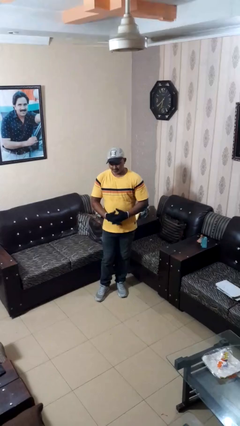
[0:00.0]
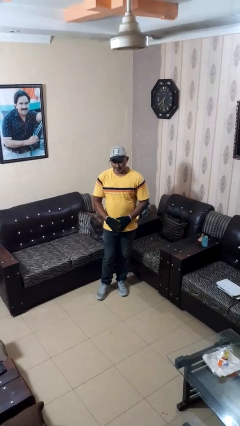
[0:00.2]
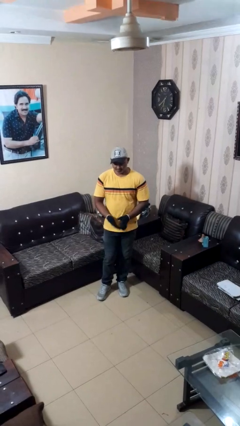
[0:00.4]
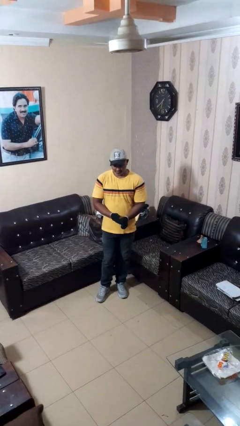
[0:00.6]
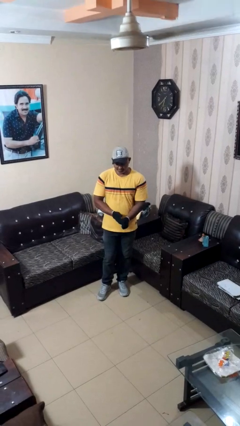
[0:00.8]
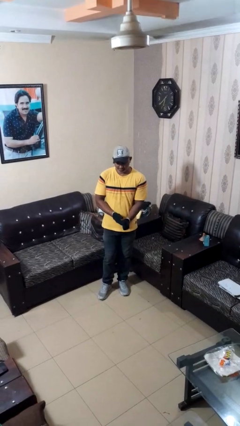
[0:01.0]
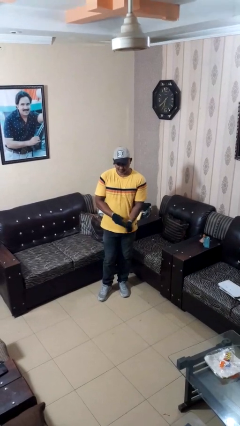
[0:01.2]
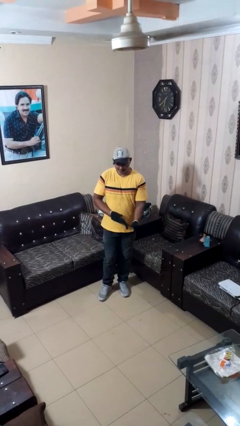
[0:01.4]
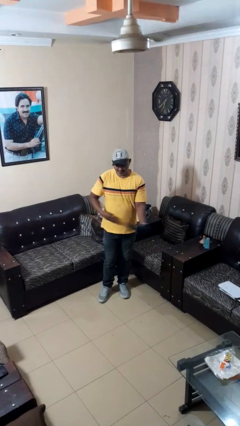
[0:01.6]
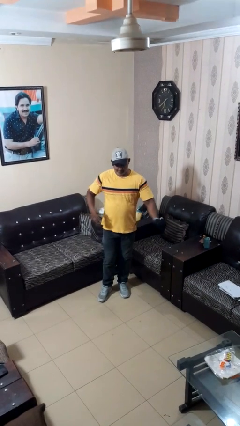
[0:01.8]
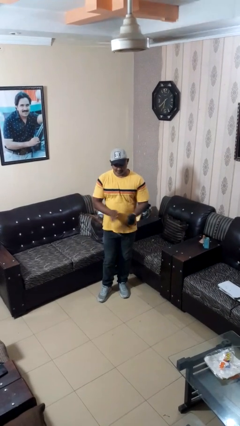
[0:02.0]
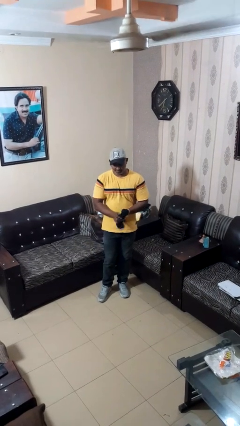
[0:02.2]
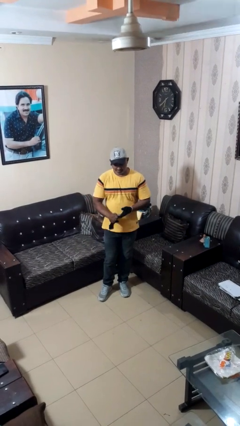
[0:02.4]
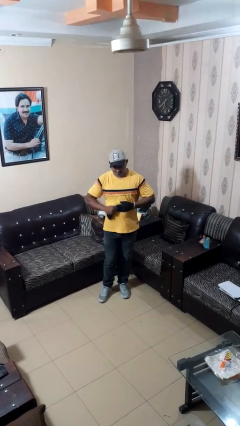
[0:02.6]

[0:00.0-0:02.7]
person takes off gloves

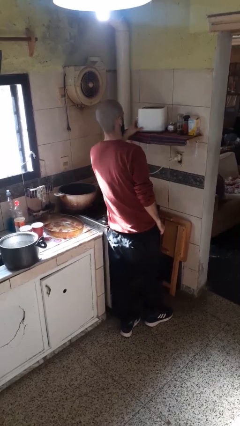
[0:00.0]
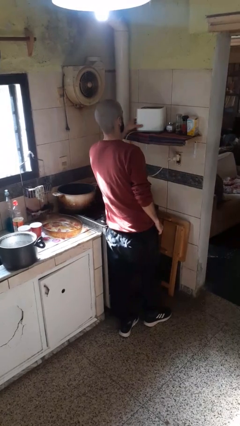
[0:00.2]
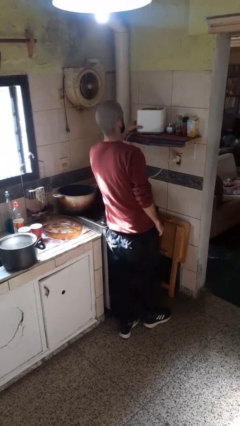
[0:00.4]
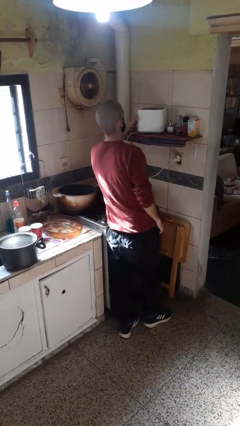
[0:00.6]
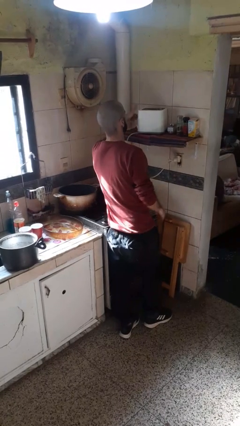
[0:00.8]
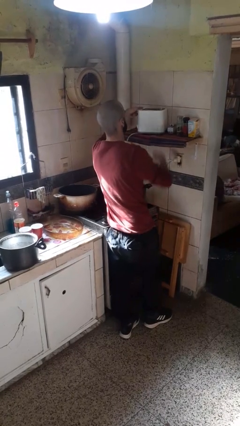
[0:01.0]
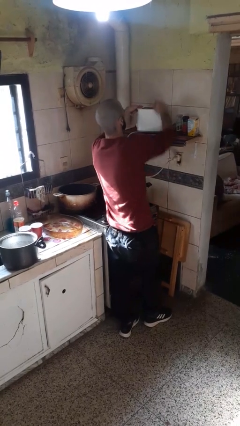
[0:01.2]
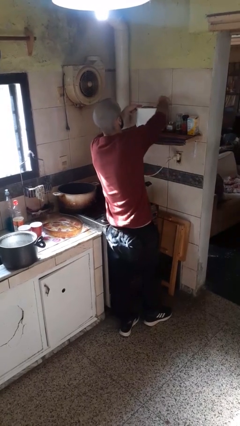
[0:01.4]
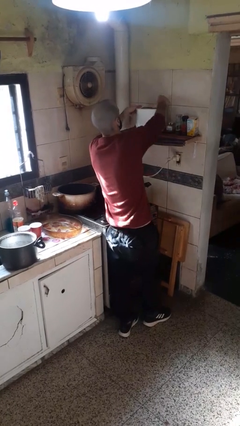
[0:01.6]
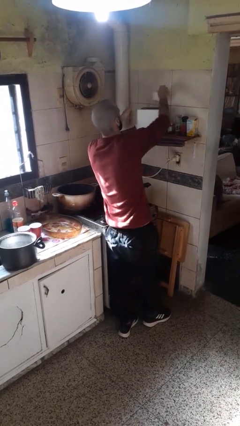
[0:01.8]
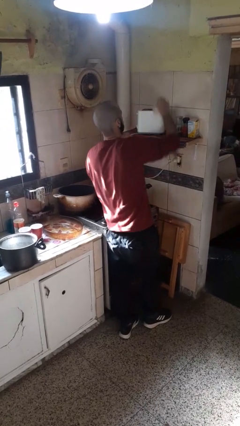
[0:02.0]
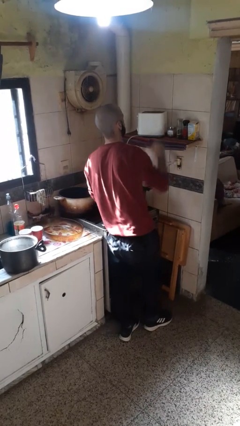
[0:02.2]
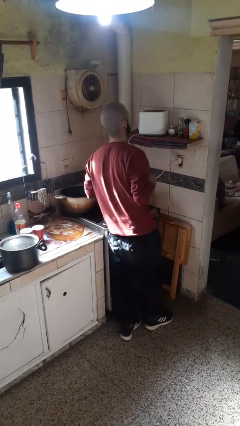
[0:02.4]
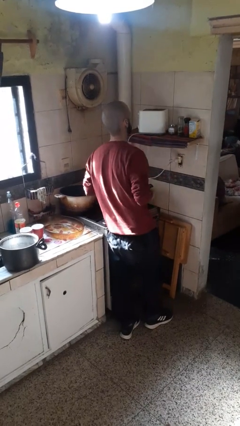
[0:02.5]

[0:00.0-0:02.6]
person takes object from toaster

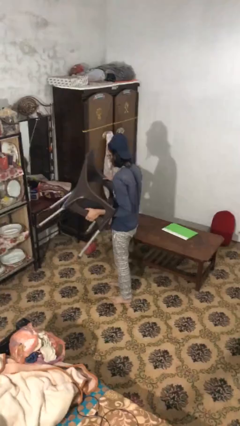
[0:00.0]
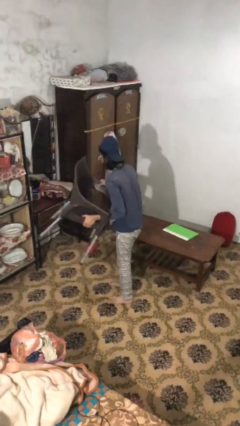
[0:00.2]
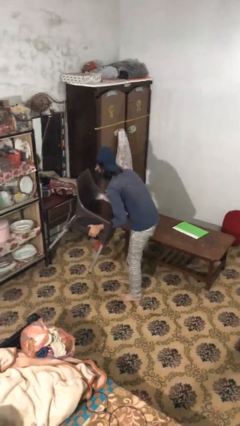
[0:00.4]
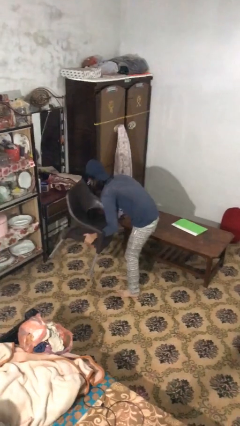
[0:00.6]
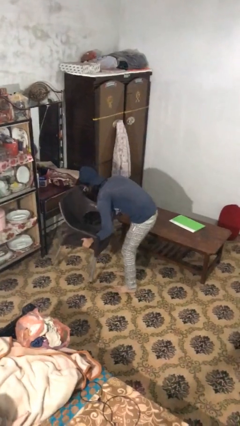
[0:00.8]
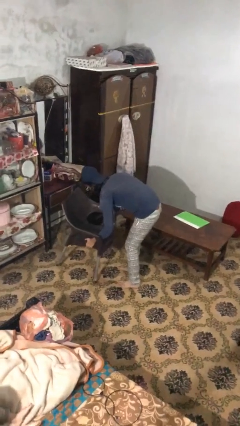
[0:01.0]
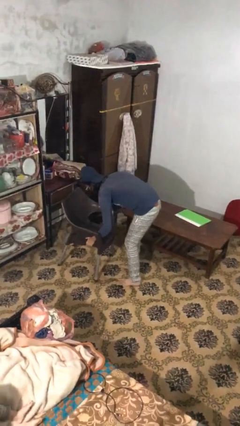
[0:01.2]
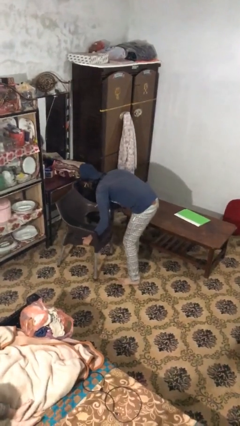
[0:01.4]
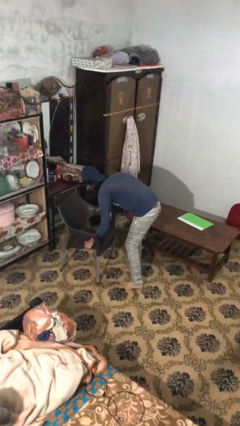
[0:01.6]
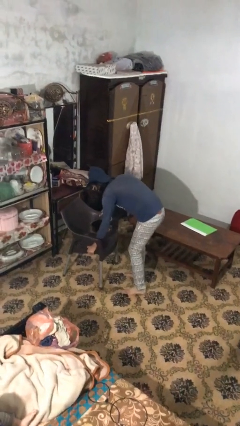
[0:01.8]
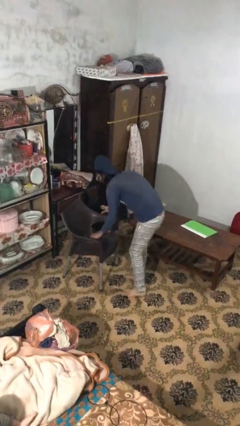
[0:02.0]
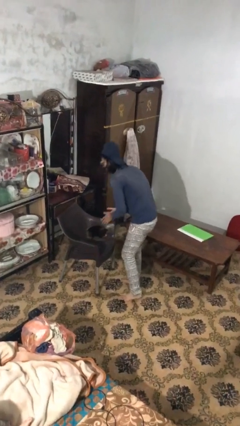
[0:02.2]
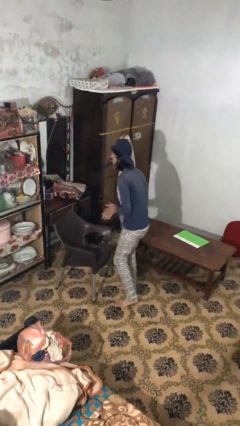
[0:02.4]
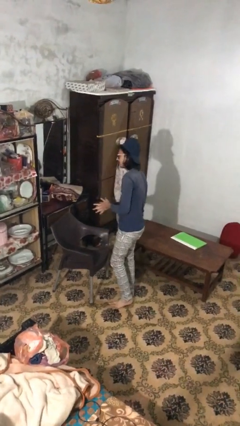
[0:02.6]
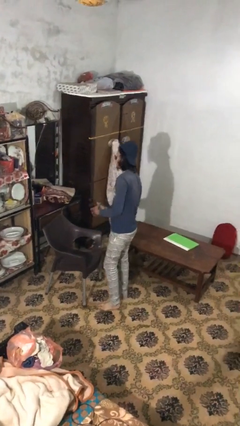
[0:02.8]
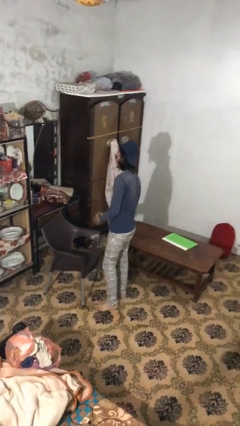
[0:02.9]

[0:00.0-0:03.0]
person puts down object on floor

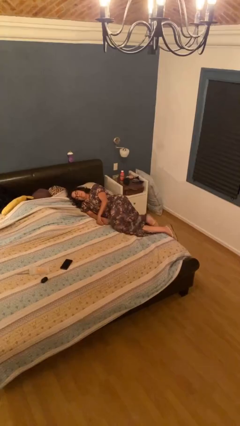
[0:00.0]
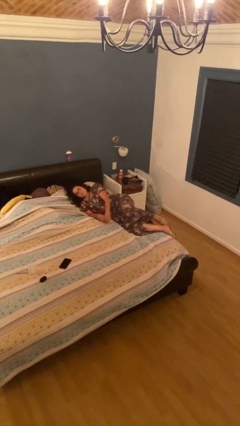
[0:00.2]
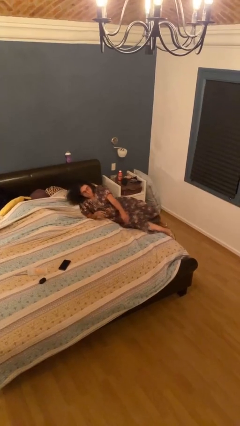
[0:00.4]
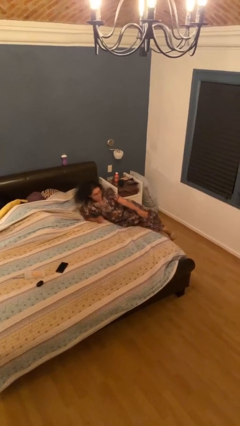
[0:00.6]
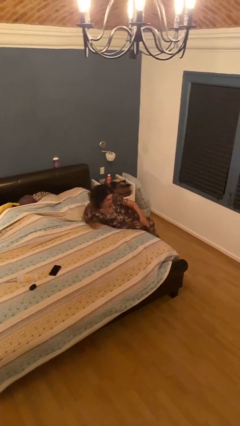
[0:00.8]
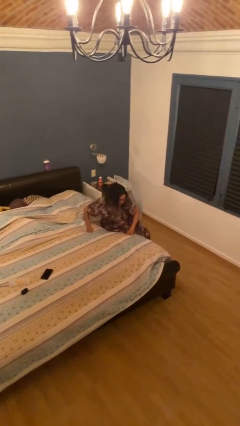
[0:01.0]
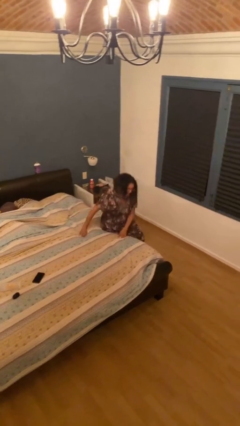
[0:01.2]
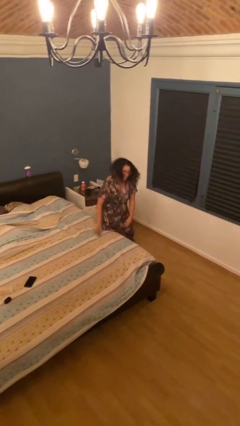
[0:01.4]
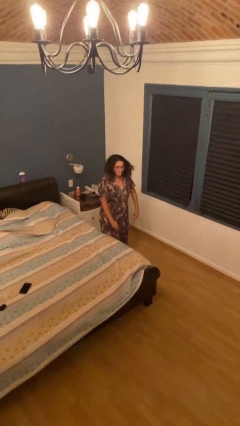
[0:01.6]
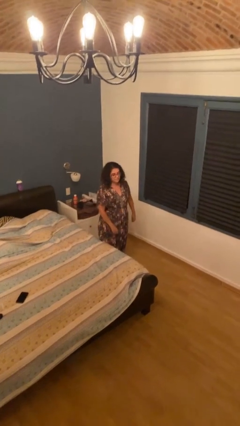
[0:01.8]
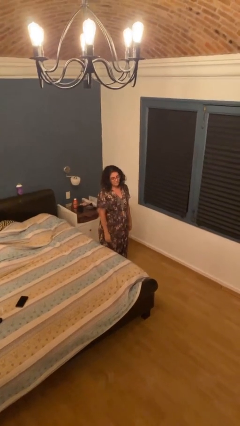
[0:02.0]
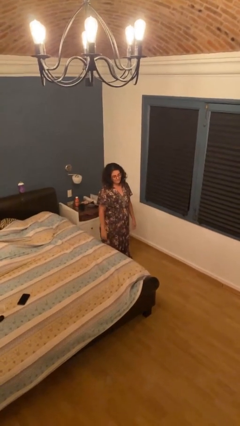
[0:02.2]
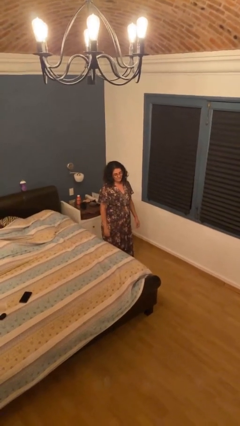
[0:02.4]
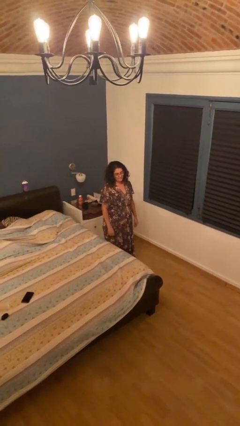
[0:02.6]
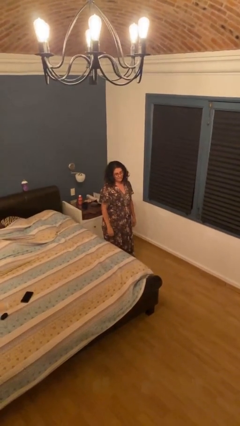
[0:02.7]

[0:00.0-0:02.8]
person stands up

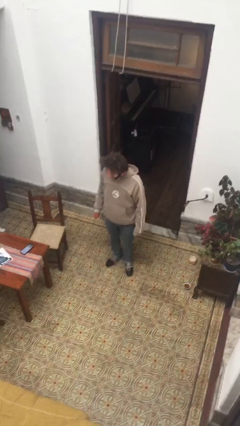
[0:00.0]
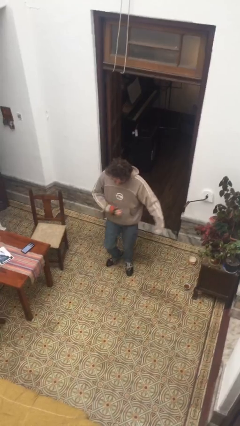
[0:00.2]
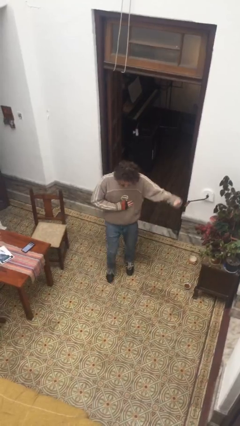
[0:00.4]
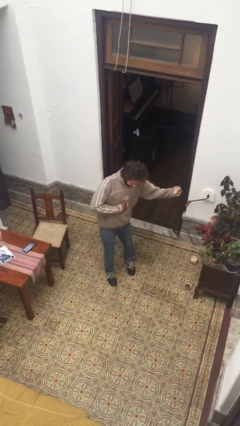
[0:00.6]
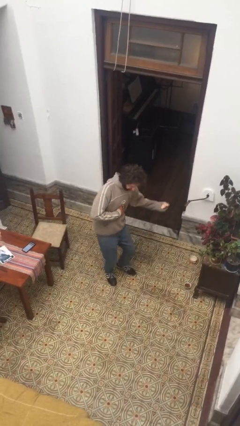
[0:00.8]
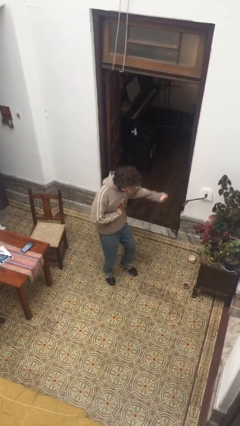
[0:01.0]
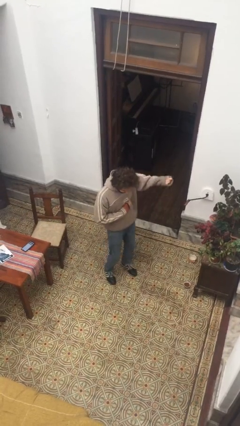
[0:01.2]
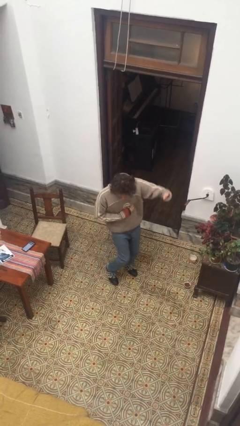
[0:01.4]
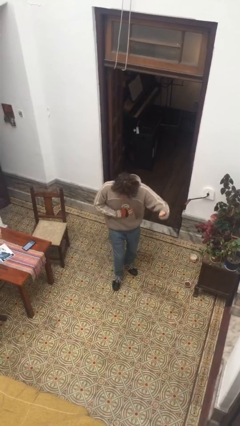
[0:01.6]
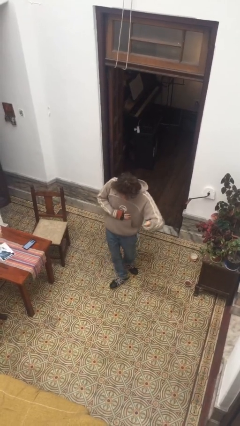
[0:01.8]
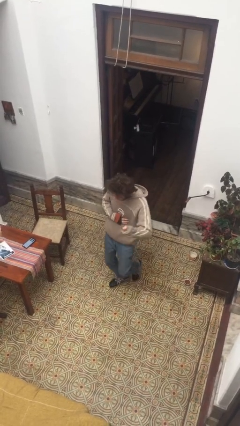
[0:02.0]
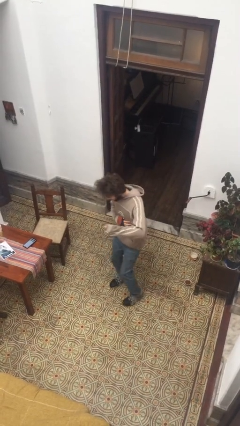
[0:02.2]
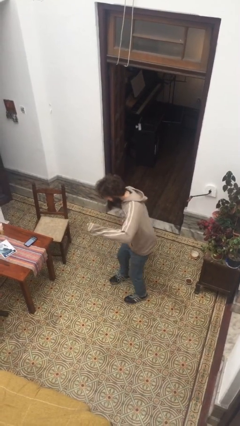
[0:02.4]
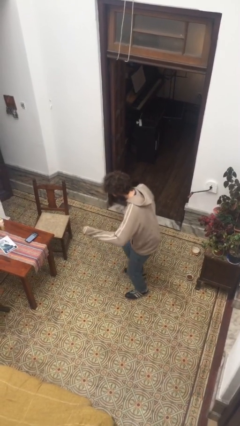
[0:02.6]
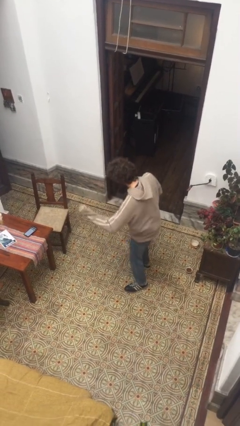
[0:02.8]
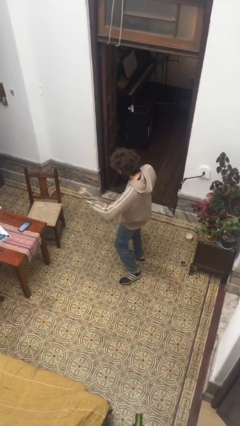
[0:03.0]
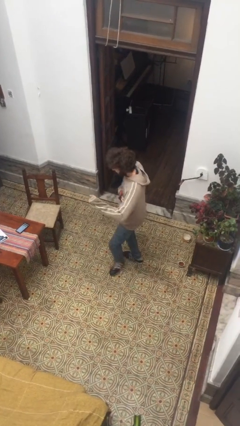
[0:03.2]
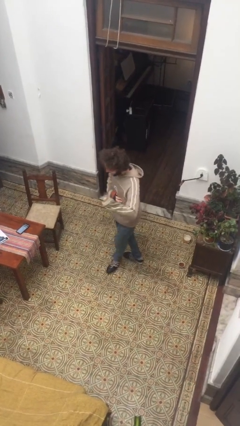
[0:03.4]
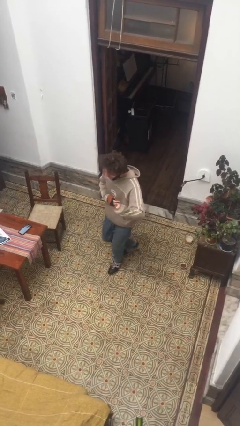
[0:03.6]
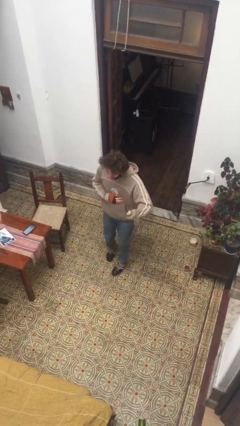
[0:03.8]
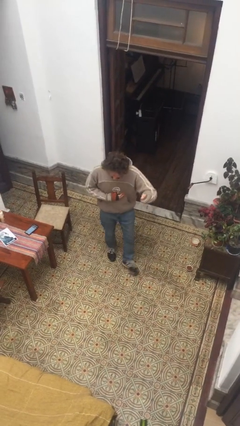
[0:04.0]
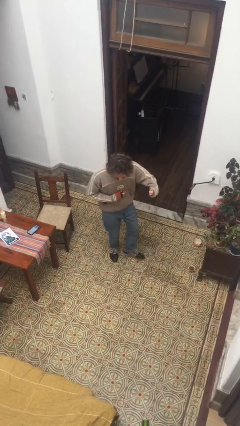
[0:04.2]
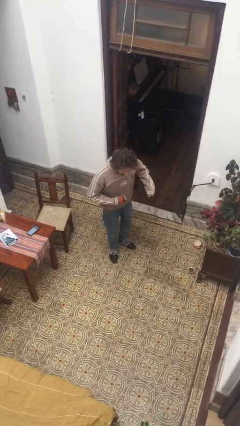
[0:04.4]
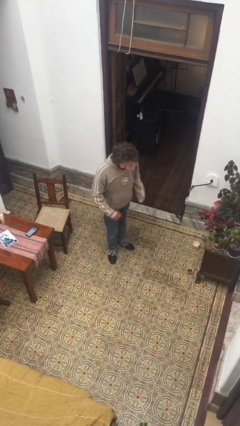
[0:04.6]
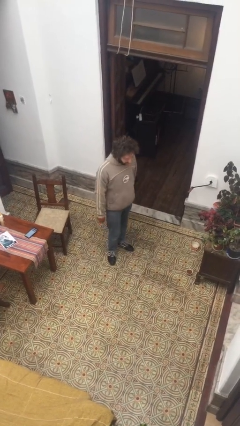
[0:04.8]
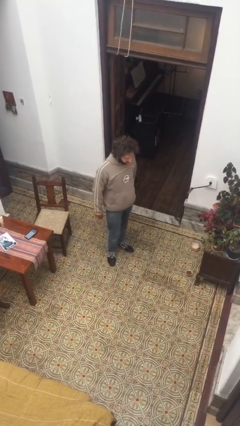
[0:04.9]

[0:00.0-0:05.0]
person dances in place

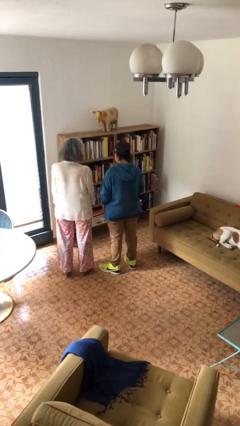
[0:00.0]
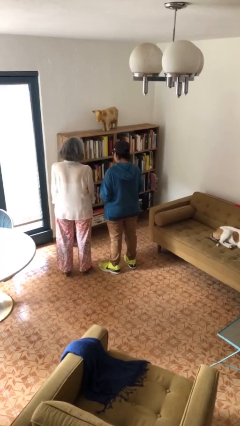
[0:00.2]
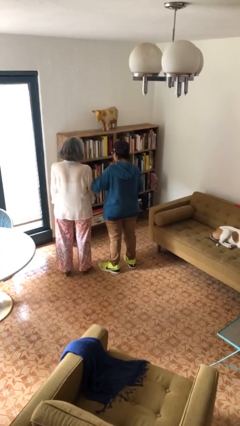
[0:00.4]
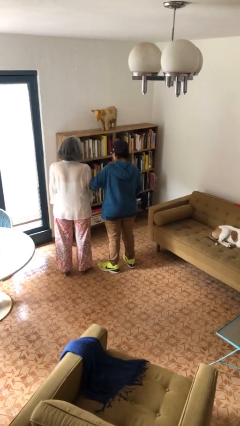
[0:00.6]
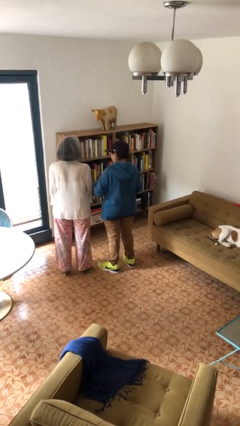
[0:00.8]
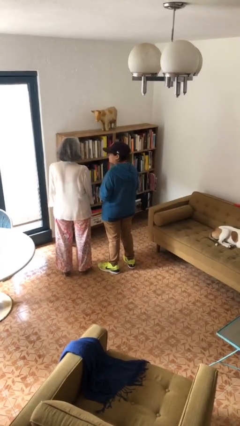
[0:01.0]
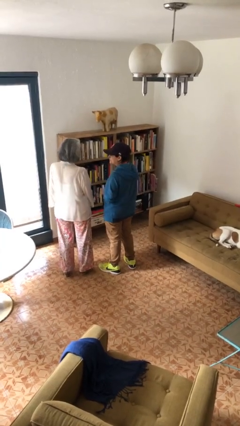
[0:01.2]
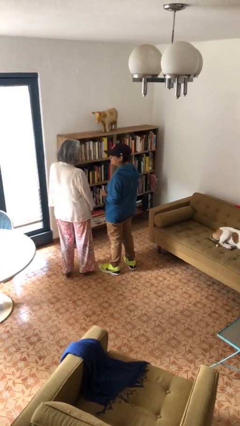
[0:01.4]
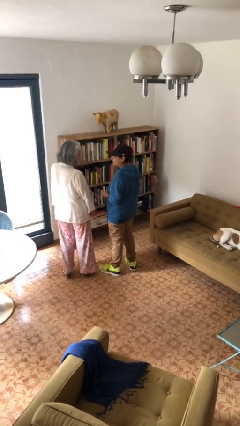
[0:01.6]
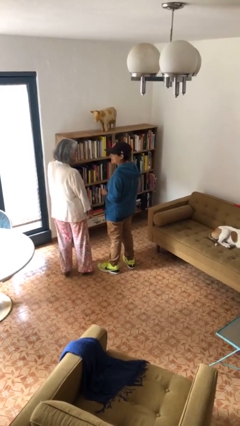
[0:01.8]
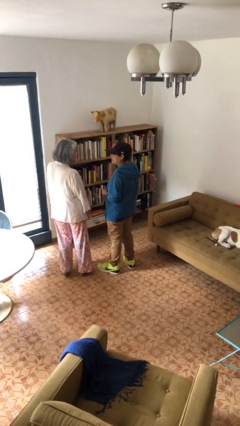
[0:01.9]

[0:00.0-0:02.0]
person nudges person with elbow
